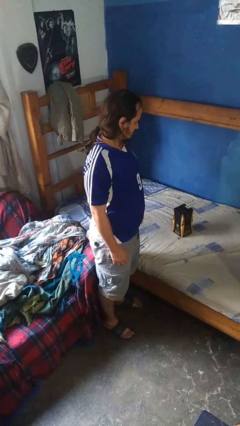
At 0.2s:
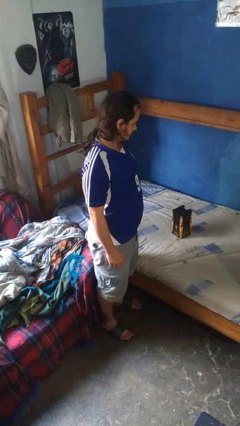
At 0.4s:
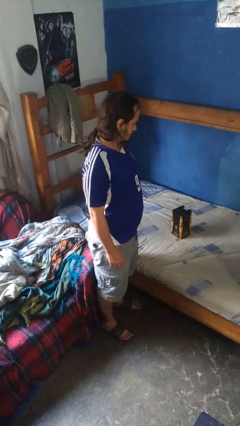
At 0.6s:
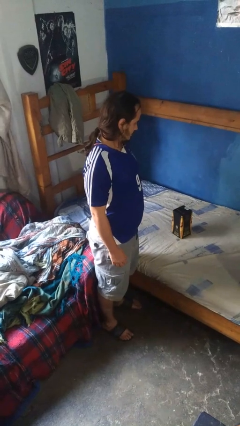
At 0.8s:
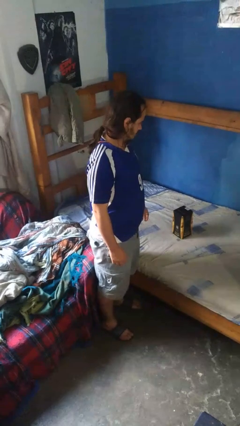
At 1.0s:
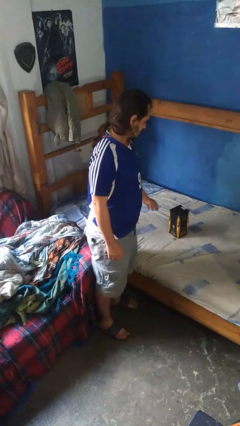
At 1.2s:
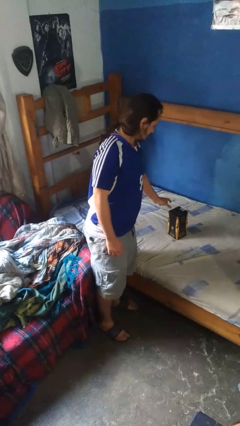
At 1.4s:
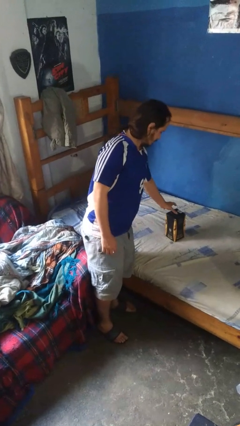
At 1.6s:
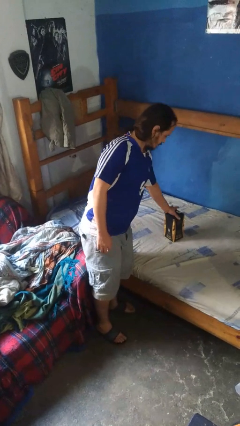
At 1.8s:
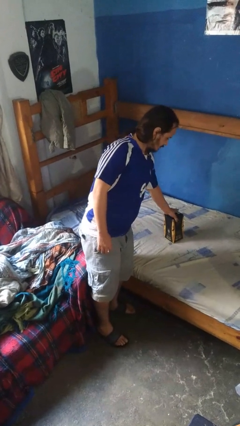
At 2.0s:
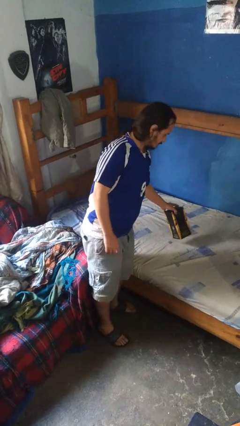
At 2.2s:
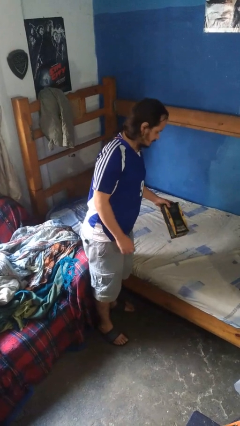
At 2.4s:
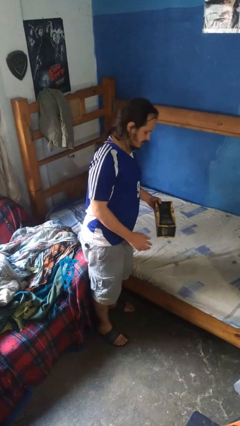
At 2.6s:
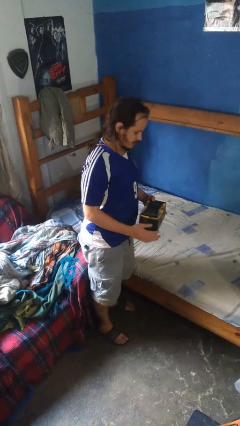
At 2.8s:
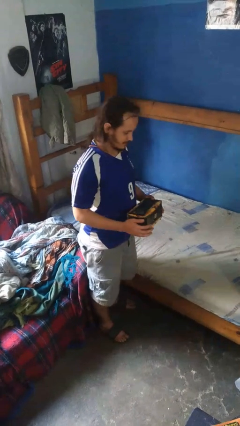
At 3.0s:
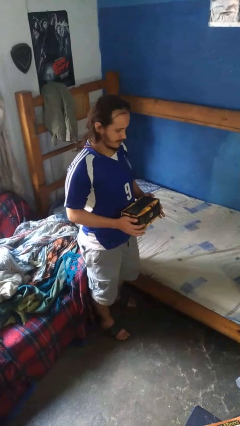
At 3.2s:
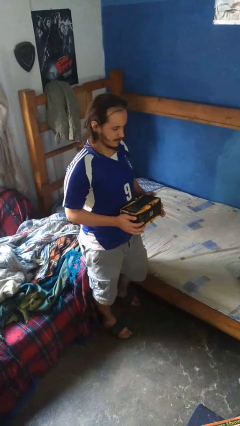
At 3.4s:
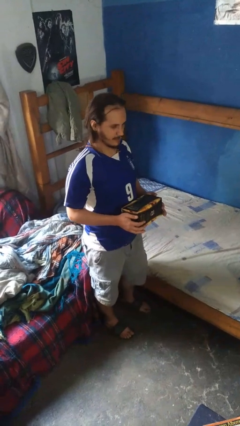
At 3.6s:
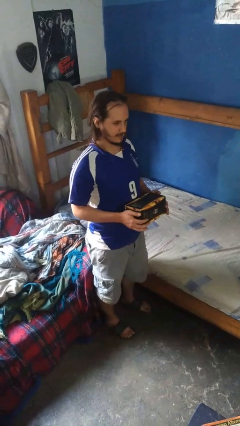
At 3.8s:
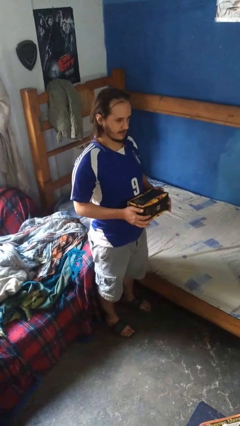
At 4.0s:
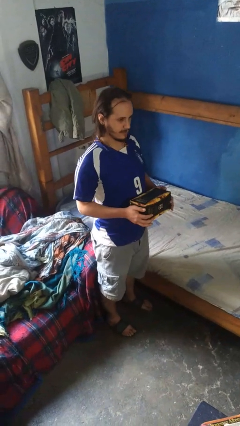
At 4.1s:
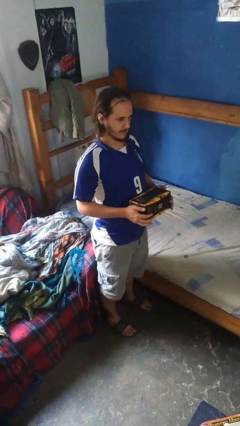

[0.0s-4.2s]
person picks up object from bed

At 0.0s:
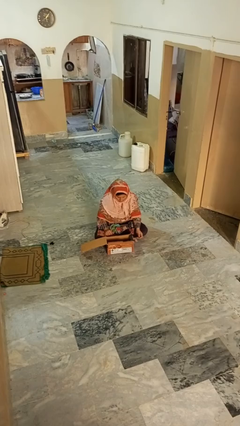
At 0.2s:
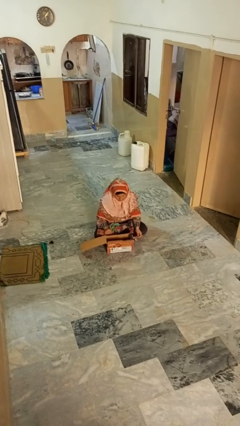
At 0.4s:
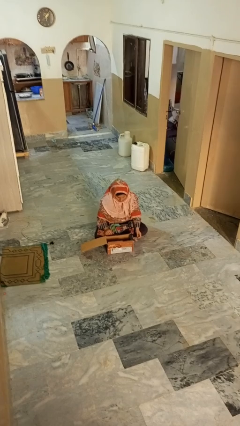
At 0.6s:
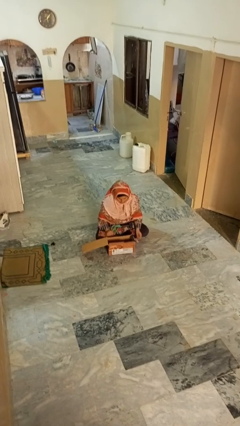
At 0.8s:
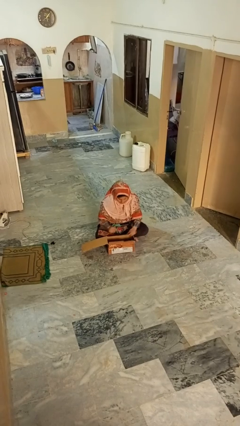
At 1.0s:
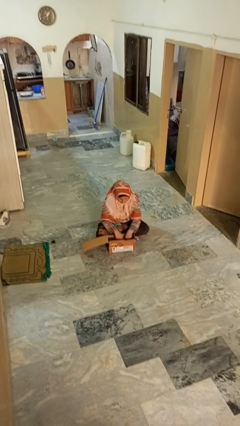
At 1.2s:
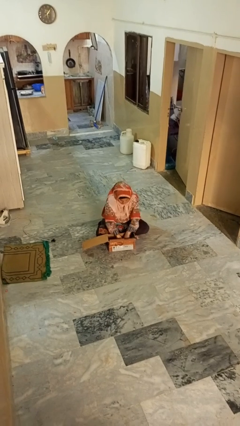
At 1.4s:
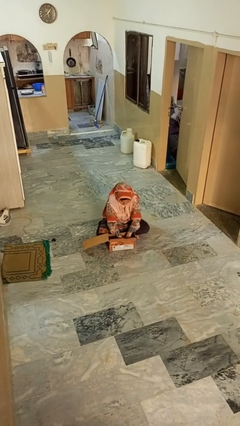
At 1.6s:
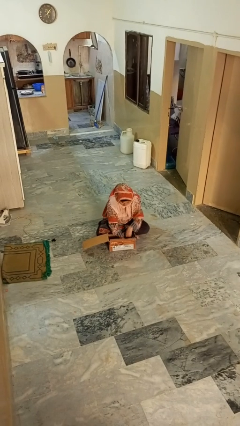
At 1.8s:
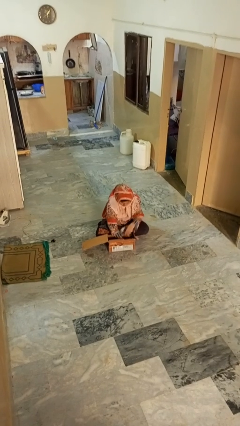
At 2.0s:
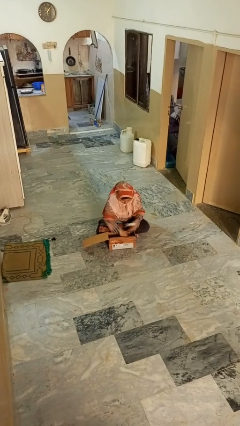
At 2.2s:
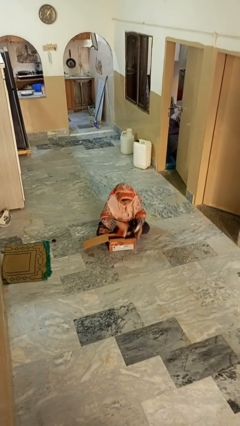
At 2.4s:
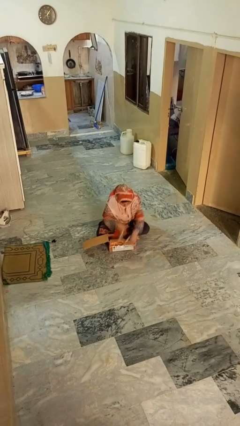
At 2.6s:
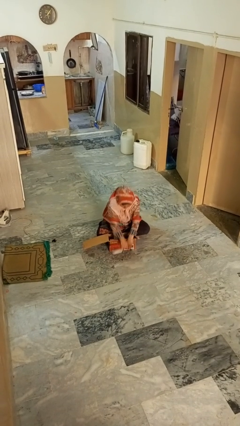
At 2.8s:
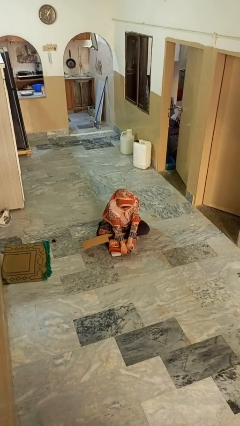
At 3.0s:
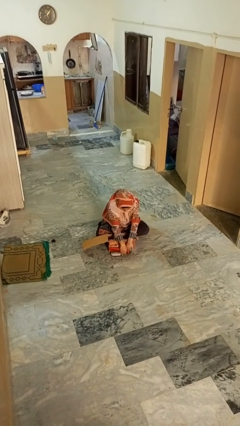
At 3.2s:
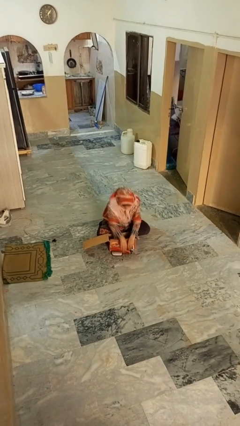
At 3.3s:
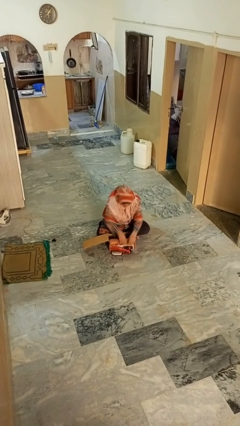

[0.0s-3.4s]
person takes object from box

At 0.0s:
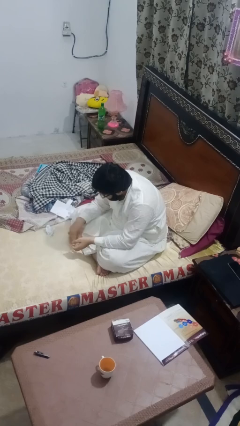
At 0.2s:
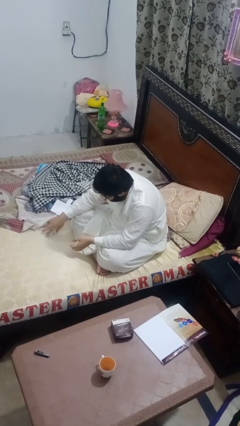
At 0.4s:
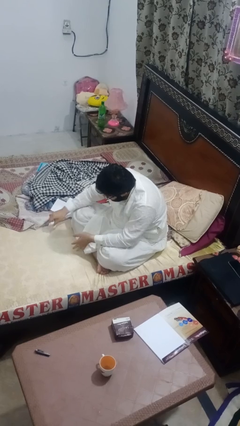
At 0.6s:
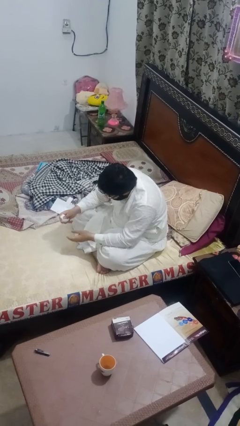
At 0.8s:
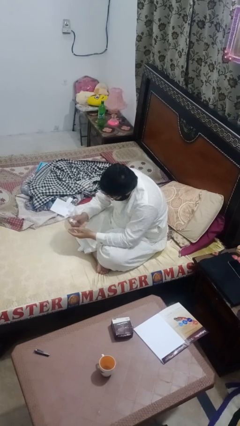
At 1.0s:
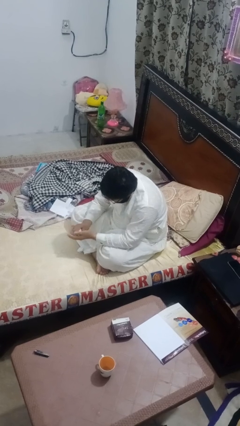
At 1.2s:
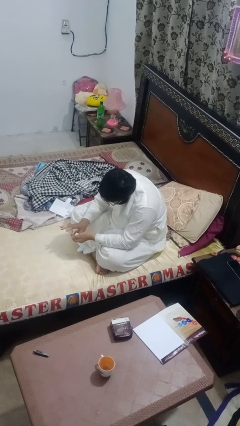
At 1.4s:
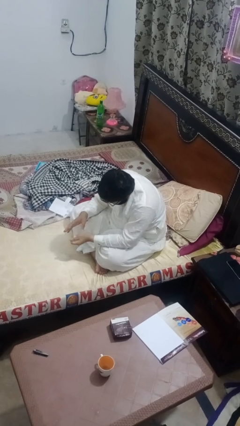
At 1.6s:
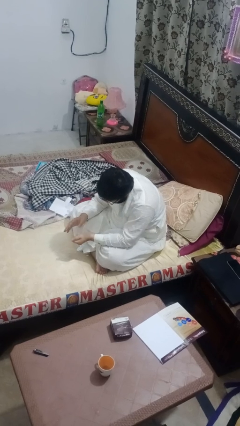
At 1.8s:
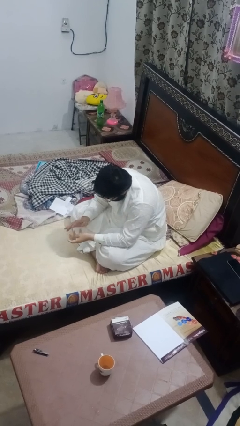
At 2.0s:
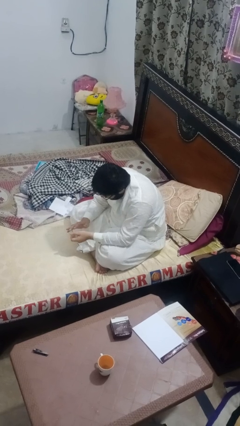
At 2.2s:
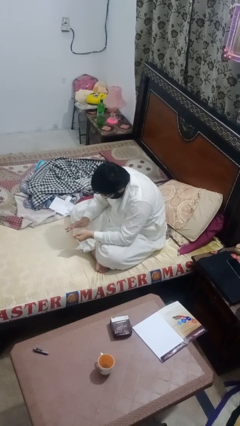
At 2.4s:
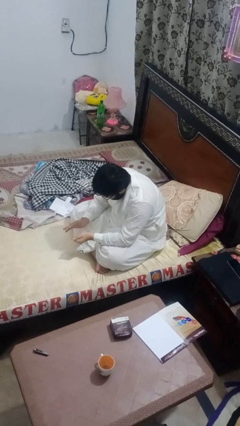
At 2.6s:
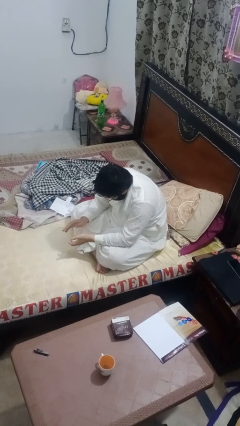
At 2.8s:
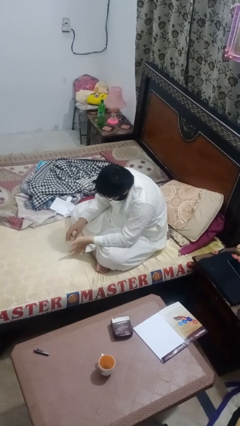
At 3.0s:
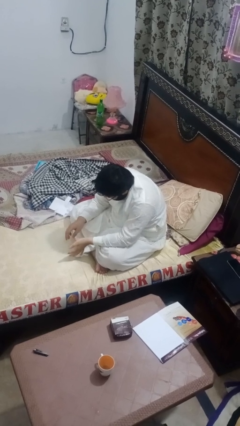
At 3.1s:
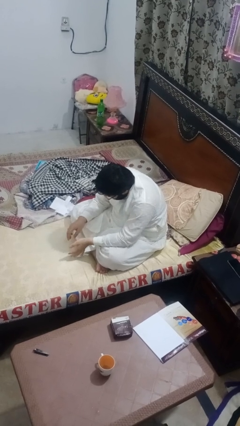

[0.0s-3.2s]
person crumples paper

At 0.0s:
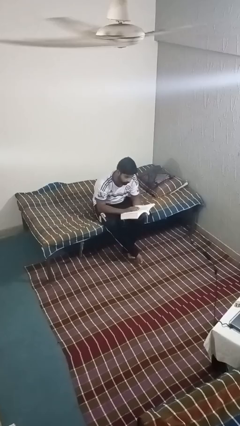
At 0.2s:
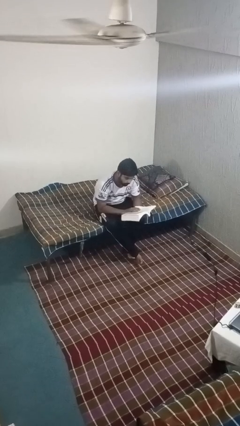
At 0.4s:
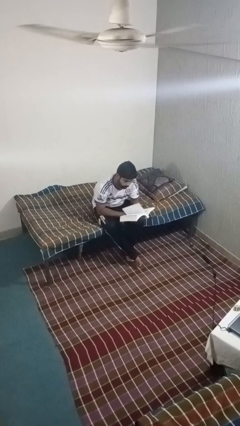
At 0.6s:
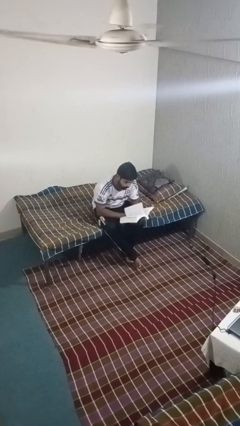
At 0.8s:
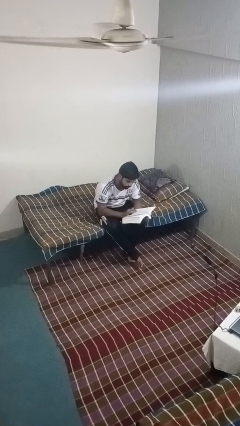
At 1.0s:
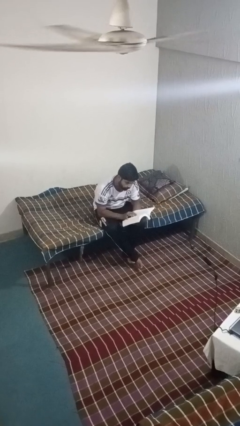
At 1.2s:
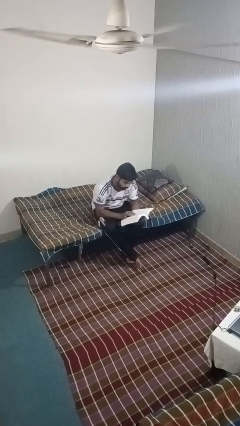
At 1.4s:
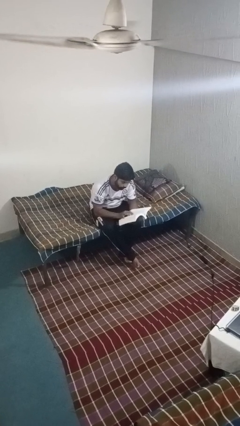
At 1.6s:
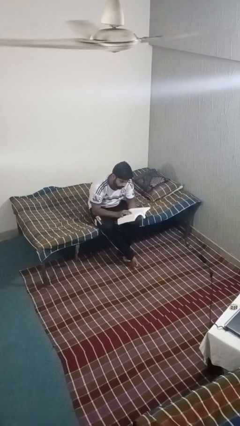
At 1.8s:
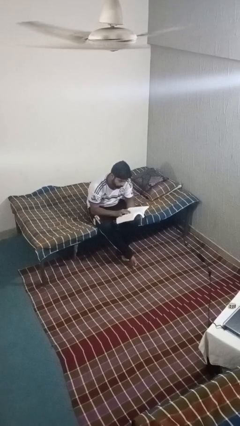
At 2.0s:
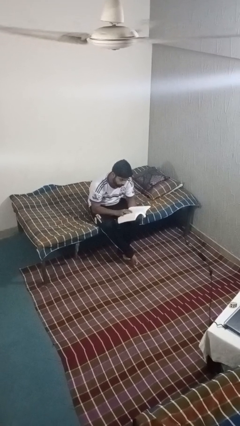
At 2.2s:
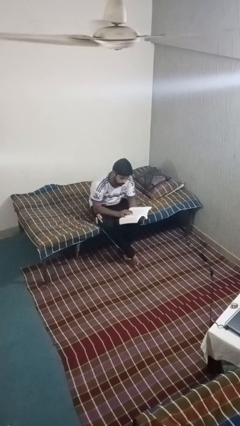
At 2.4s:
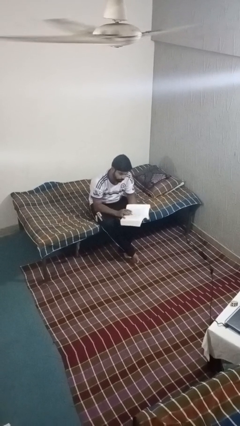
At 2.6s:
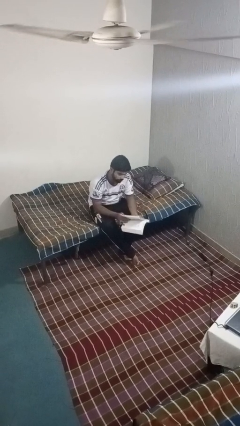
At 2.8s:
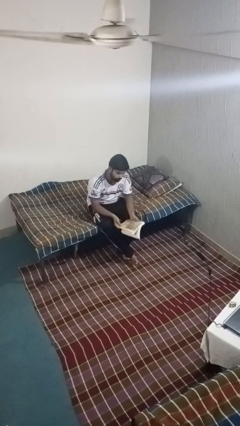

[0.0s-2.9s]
person reads book

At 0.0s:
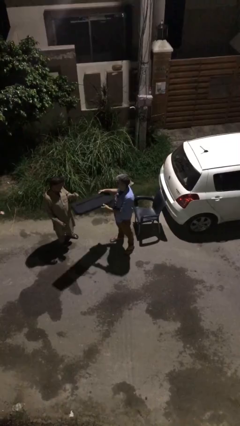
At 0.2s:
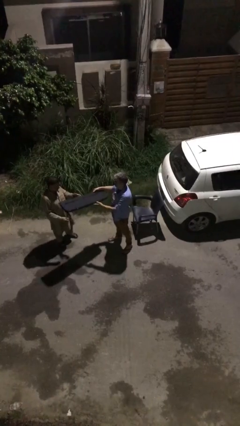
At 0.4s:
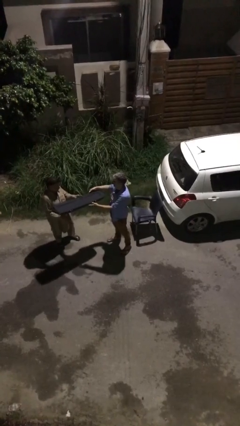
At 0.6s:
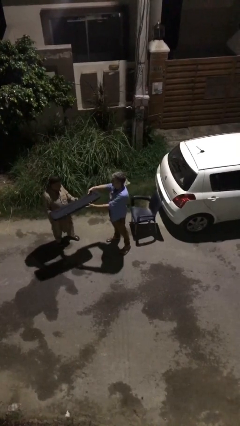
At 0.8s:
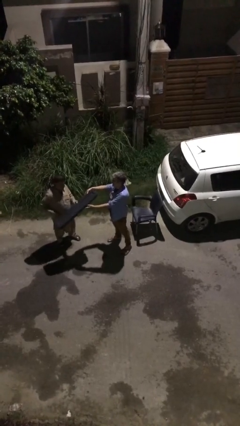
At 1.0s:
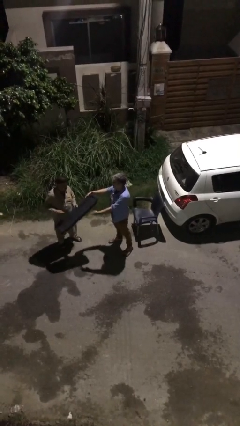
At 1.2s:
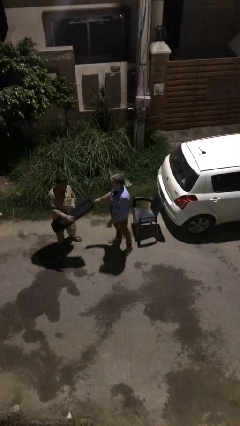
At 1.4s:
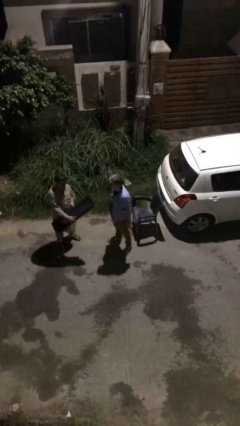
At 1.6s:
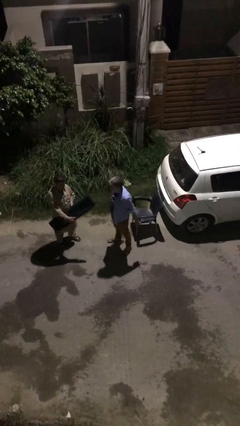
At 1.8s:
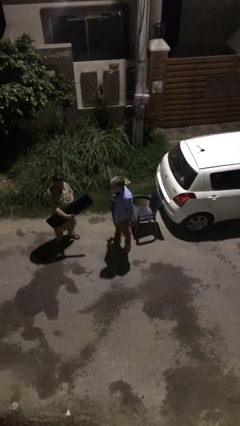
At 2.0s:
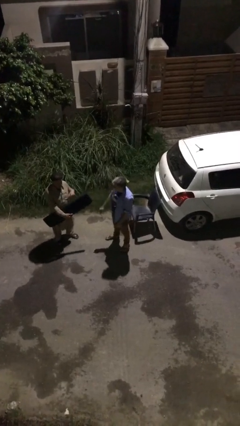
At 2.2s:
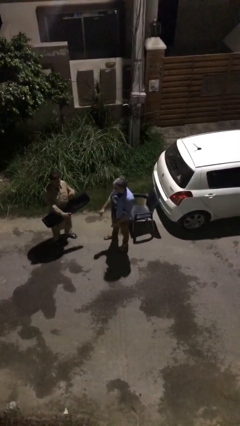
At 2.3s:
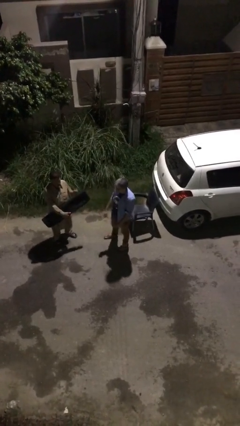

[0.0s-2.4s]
person transfers object to person

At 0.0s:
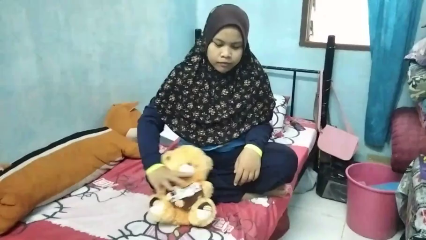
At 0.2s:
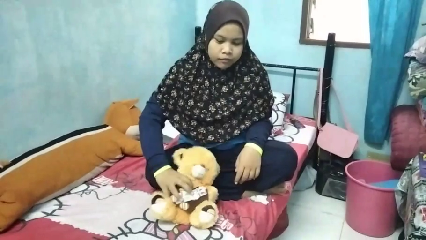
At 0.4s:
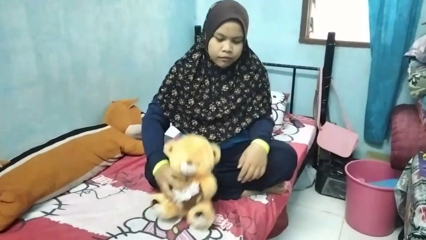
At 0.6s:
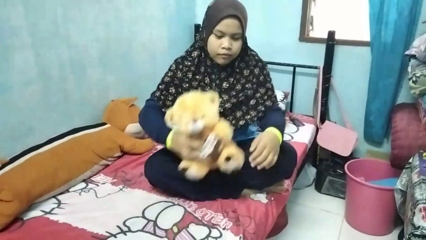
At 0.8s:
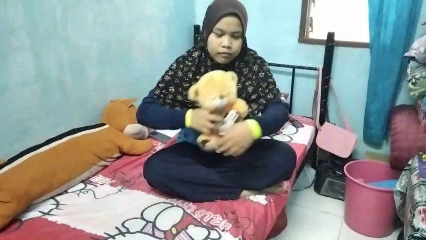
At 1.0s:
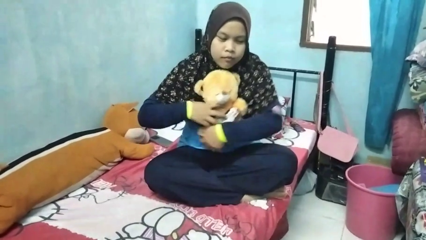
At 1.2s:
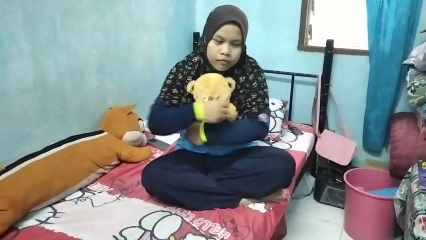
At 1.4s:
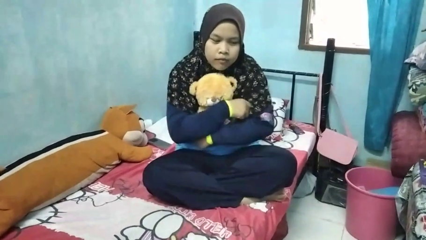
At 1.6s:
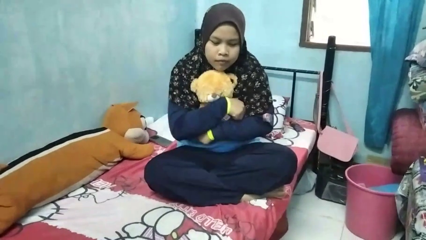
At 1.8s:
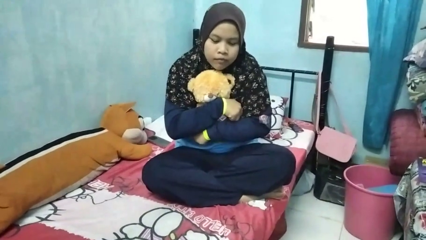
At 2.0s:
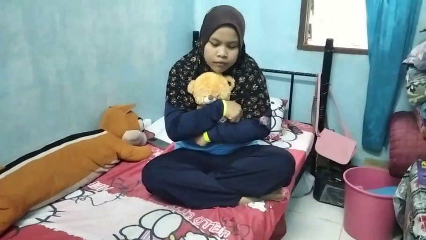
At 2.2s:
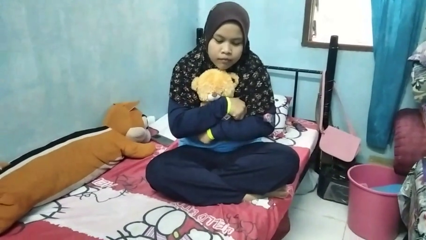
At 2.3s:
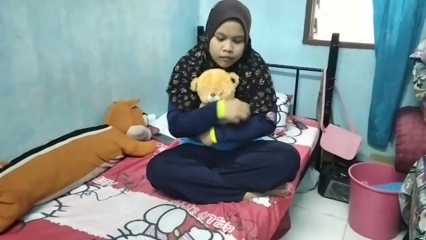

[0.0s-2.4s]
person hugs stuffed animal
